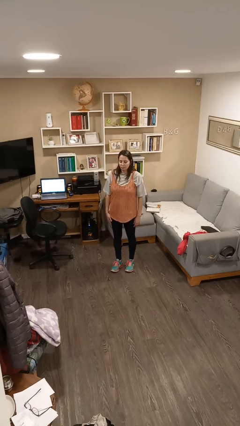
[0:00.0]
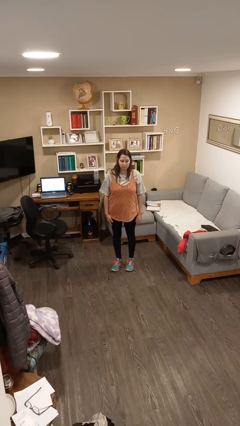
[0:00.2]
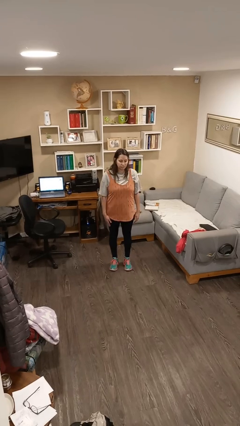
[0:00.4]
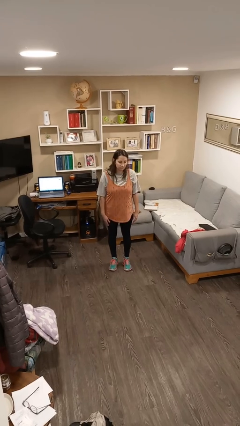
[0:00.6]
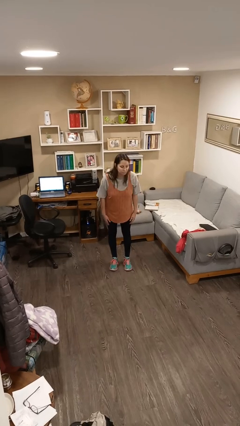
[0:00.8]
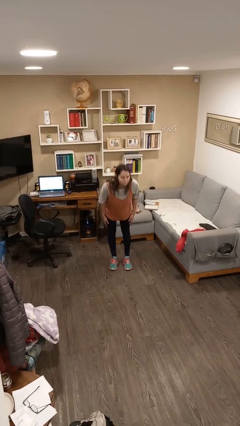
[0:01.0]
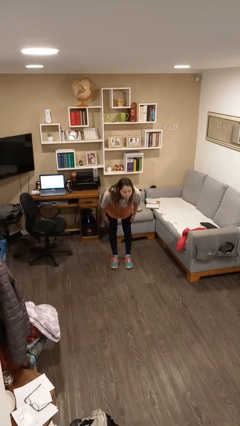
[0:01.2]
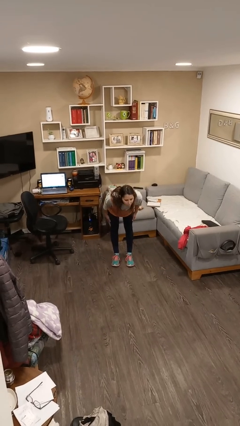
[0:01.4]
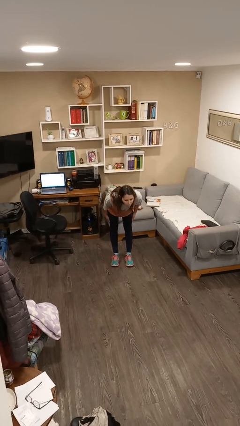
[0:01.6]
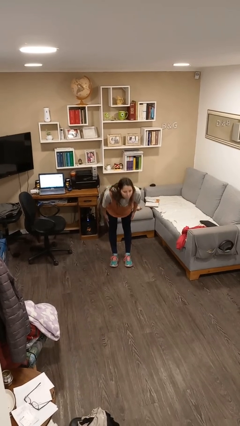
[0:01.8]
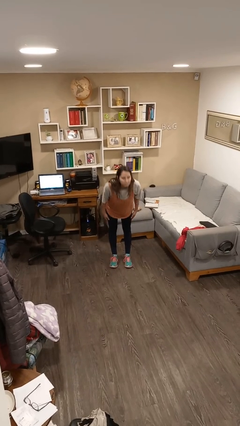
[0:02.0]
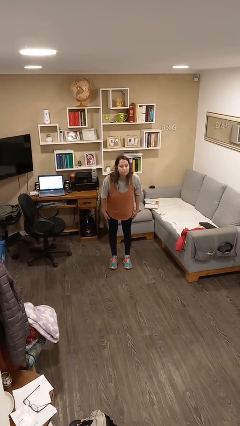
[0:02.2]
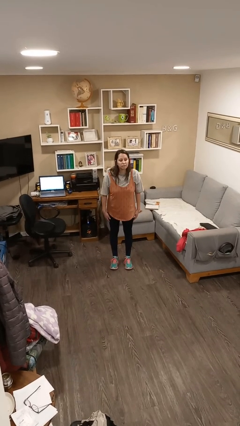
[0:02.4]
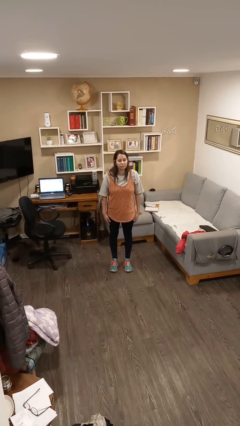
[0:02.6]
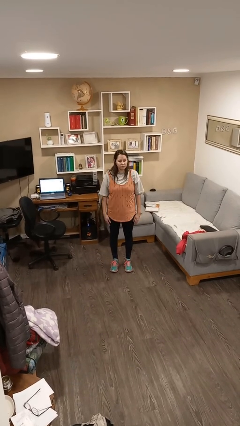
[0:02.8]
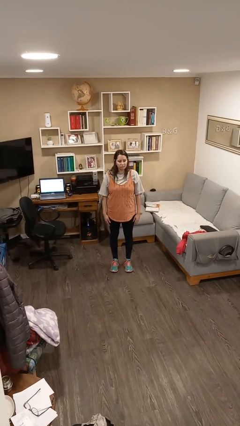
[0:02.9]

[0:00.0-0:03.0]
person bows

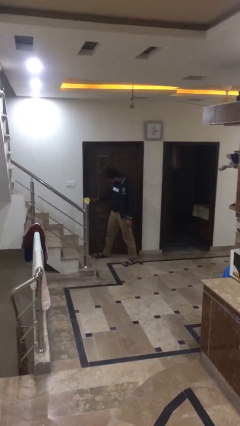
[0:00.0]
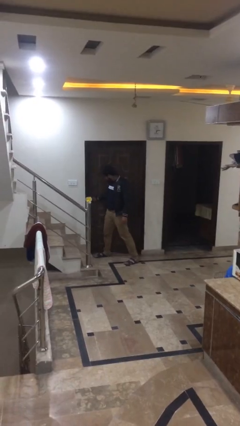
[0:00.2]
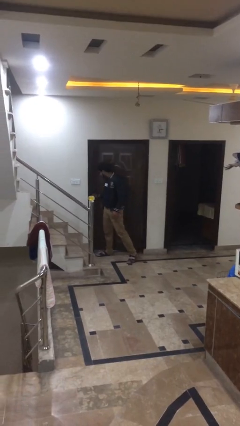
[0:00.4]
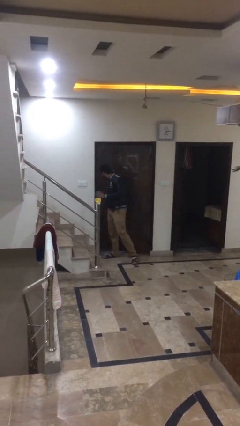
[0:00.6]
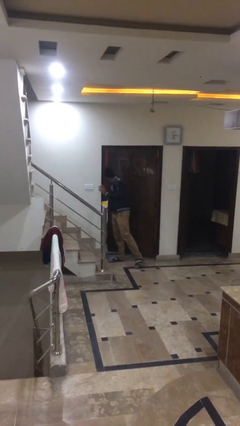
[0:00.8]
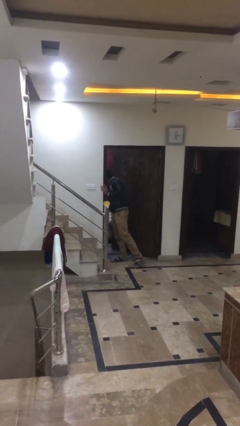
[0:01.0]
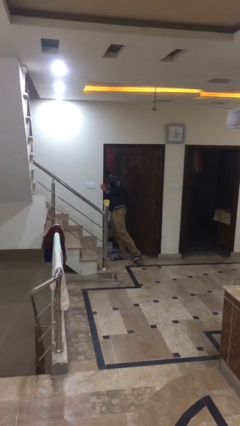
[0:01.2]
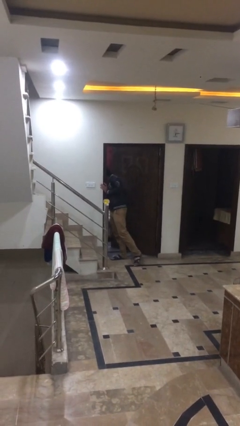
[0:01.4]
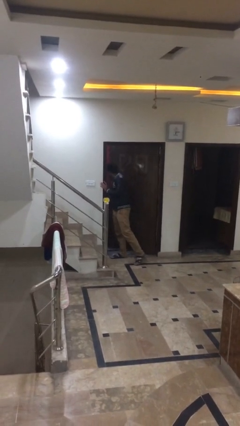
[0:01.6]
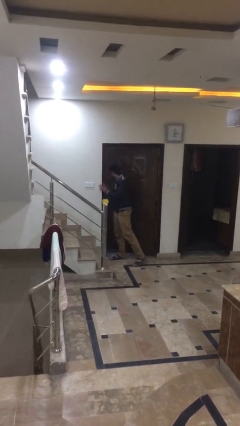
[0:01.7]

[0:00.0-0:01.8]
person opens facility door

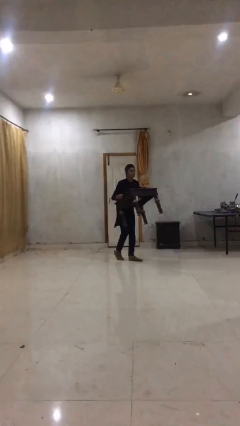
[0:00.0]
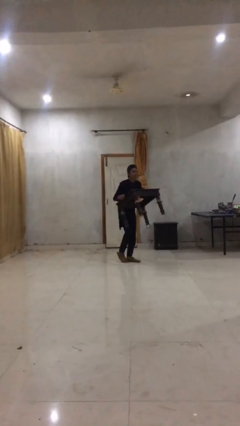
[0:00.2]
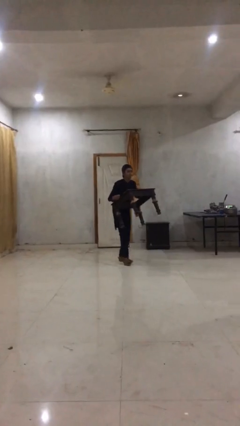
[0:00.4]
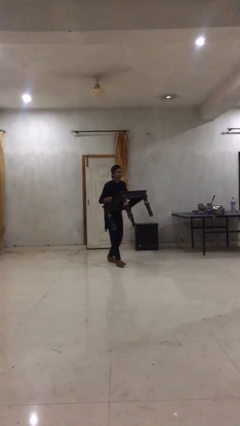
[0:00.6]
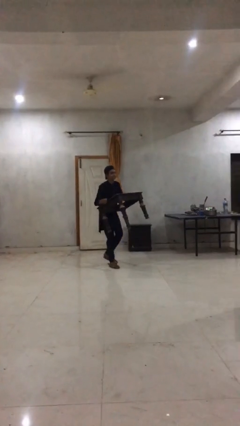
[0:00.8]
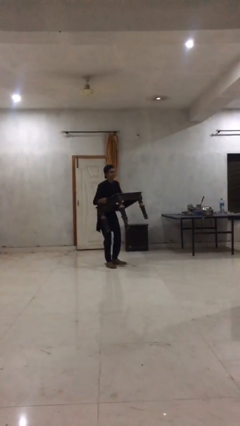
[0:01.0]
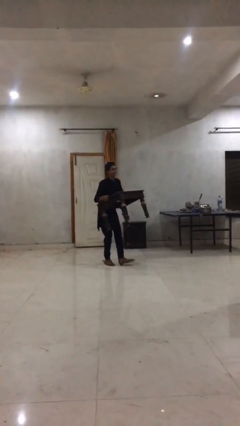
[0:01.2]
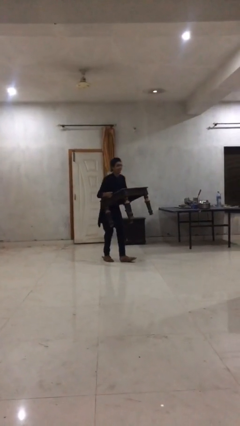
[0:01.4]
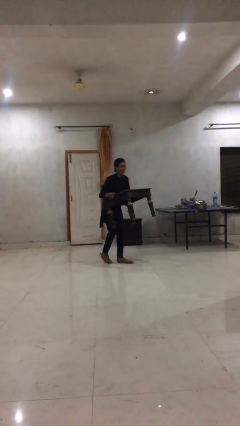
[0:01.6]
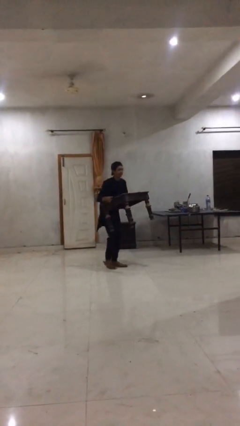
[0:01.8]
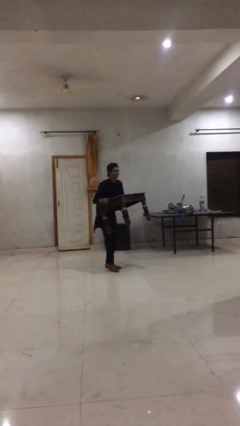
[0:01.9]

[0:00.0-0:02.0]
person carries heavy object

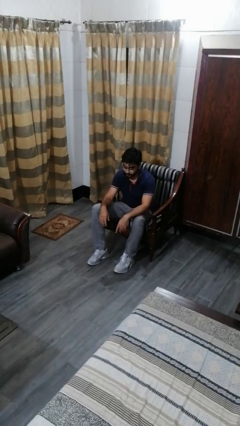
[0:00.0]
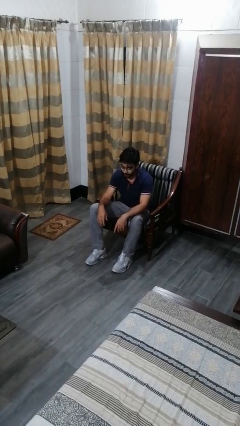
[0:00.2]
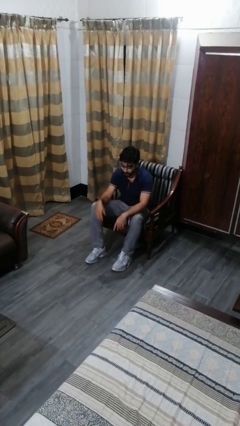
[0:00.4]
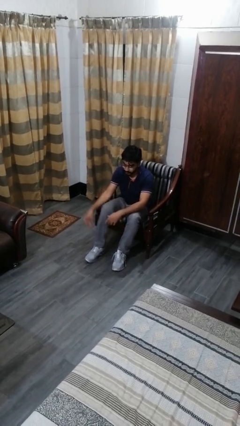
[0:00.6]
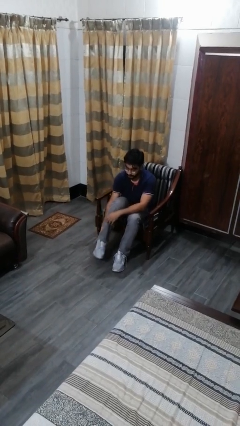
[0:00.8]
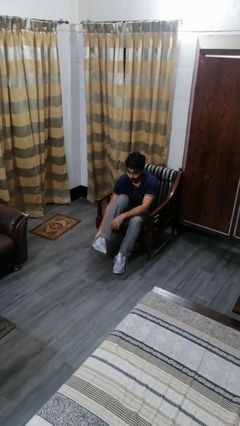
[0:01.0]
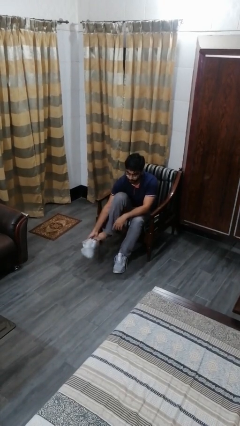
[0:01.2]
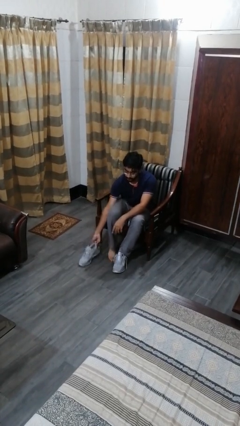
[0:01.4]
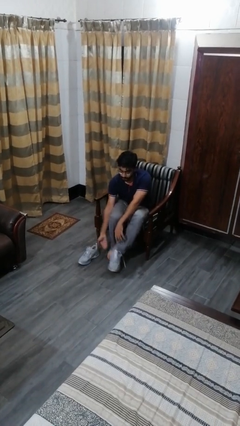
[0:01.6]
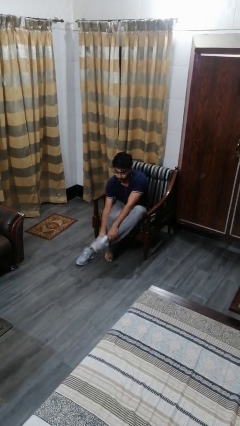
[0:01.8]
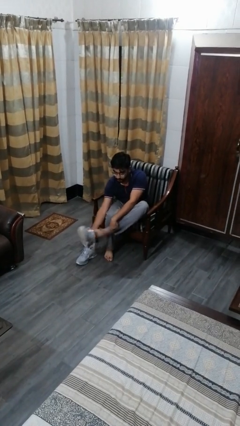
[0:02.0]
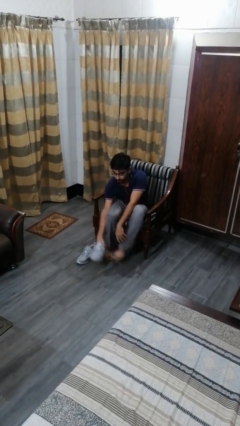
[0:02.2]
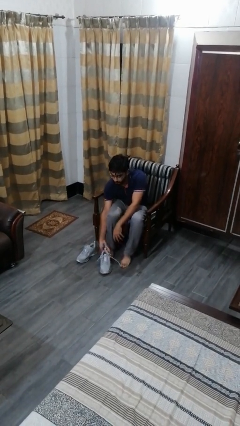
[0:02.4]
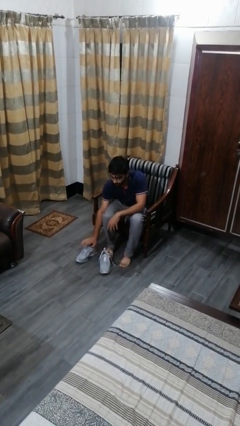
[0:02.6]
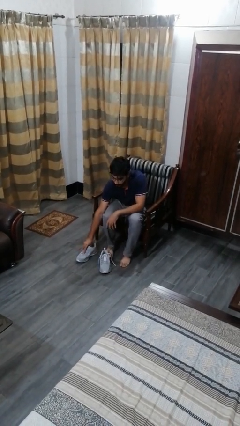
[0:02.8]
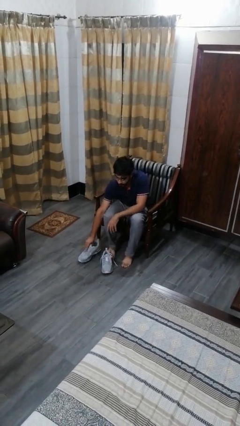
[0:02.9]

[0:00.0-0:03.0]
person takes off shoes

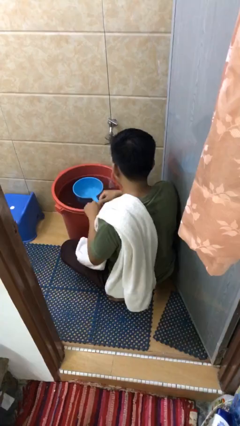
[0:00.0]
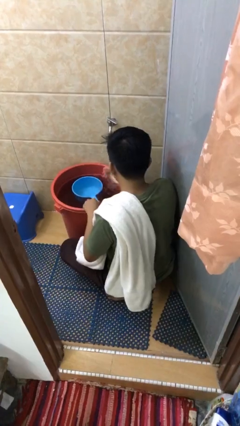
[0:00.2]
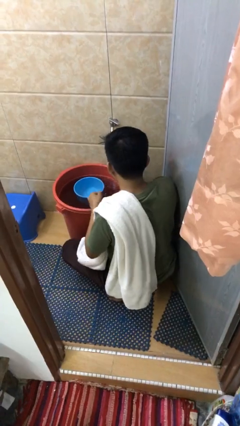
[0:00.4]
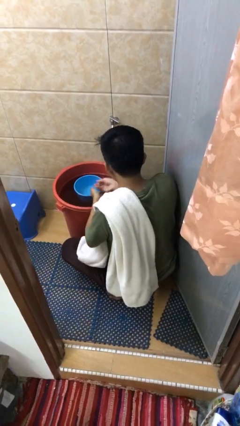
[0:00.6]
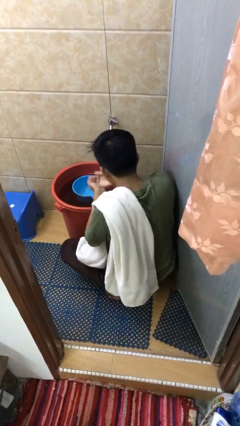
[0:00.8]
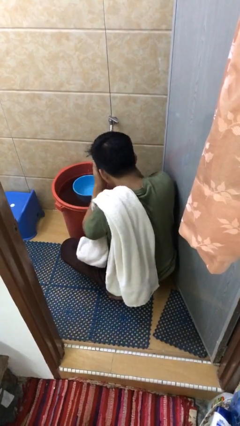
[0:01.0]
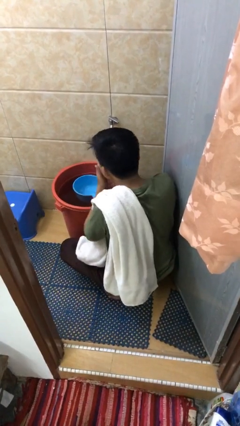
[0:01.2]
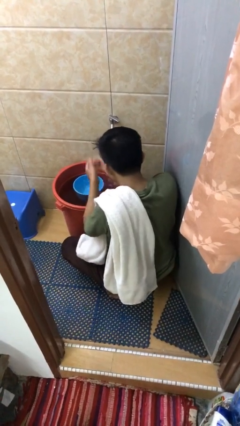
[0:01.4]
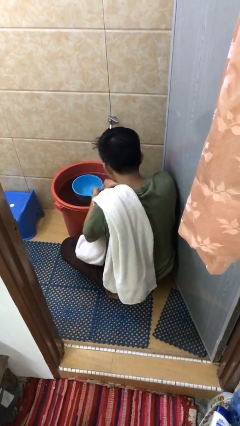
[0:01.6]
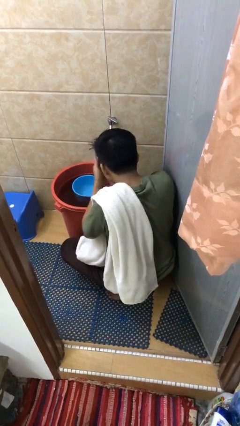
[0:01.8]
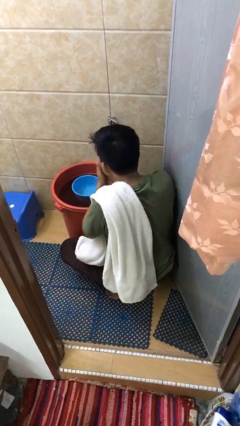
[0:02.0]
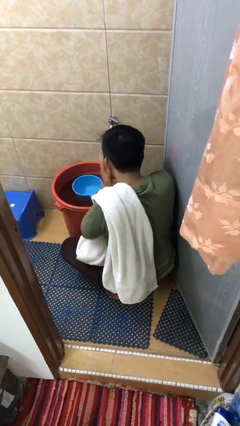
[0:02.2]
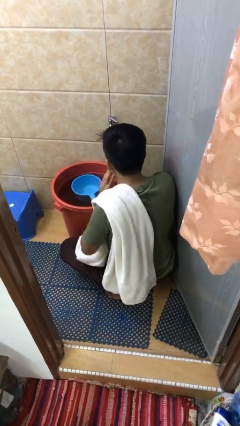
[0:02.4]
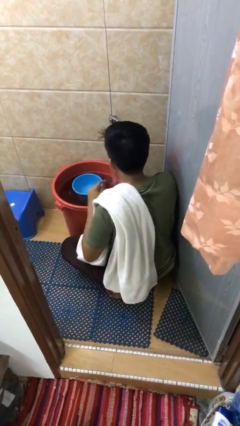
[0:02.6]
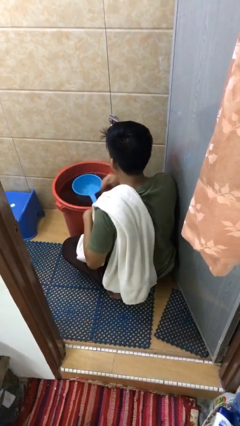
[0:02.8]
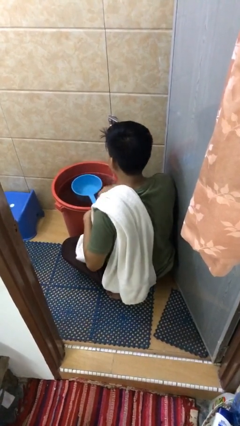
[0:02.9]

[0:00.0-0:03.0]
person washes face

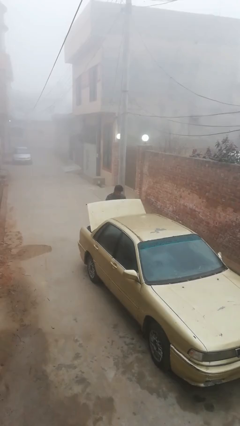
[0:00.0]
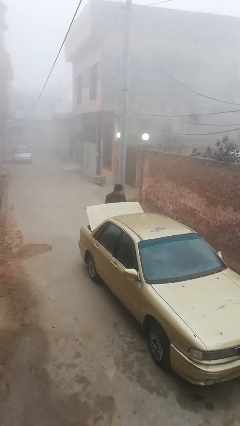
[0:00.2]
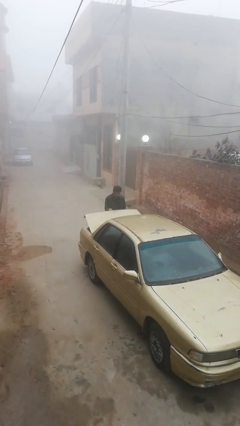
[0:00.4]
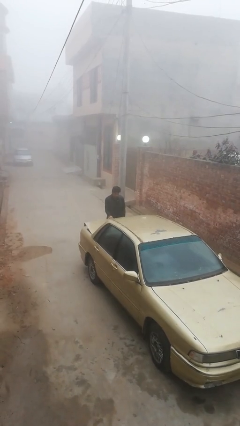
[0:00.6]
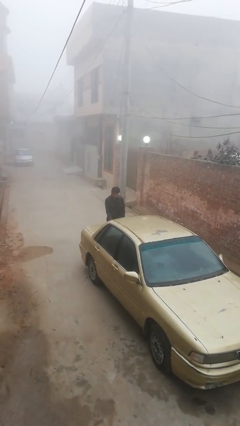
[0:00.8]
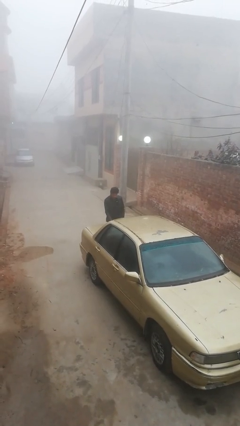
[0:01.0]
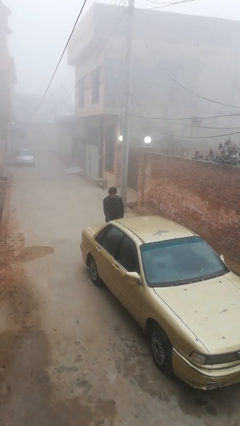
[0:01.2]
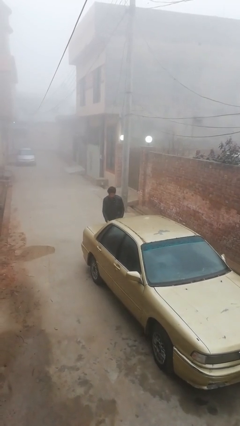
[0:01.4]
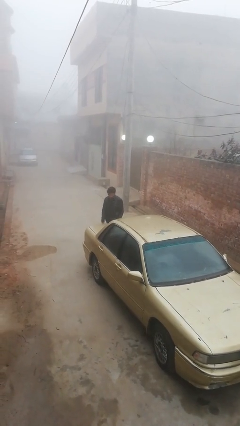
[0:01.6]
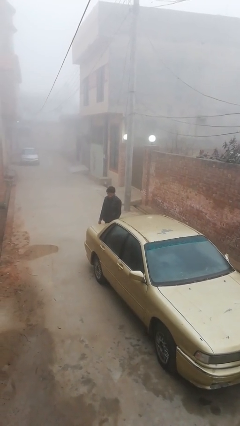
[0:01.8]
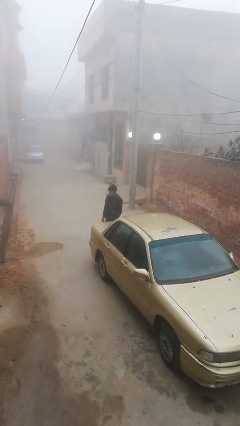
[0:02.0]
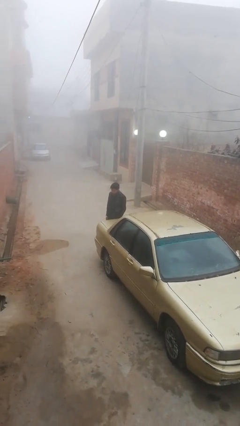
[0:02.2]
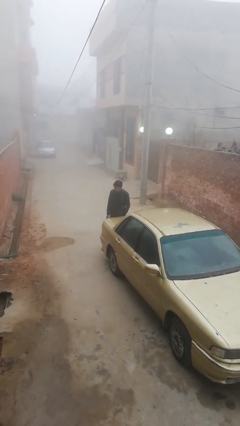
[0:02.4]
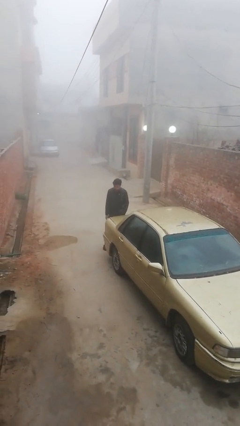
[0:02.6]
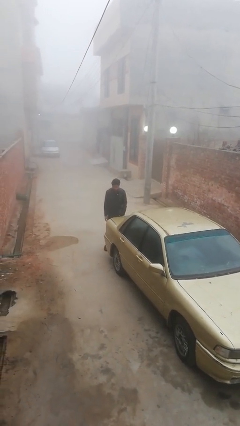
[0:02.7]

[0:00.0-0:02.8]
person closes car trunk

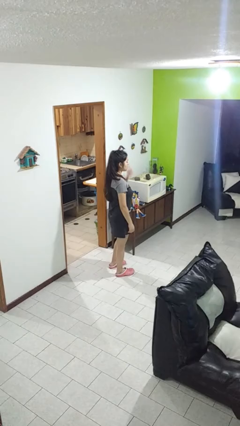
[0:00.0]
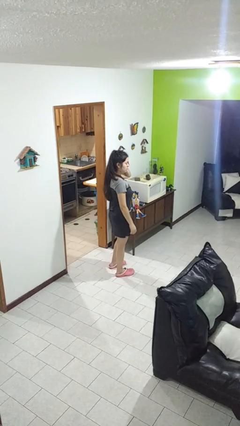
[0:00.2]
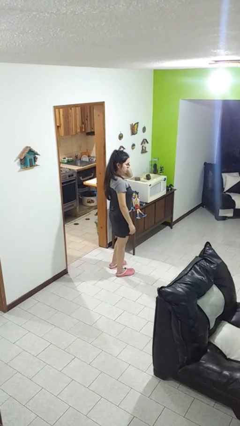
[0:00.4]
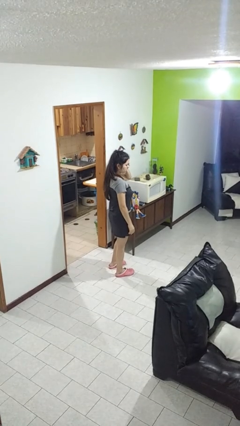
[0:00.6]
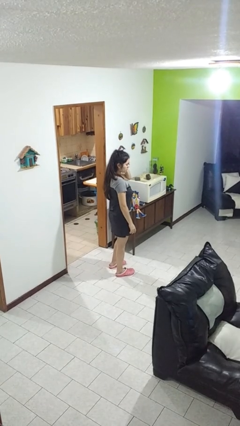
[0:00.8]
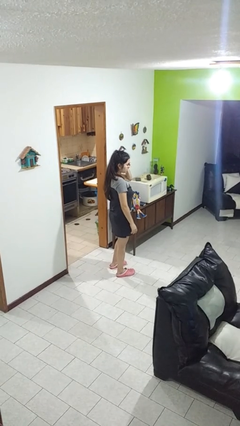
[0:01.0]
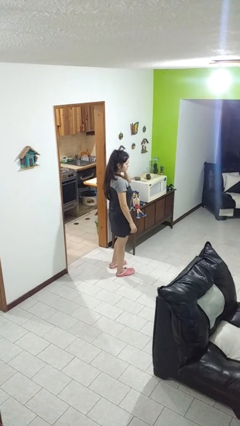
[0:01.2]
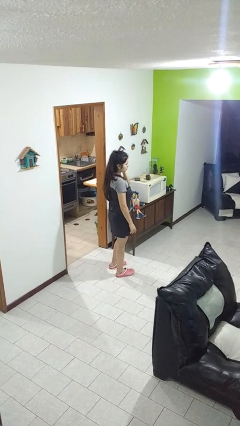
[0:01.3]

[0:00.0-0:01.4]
person rubs eyes
